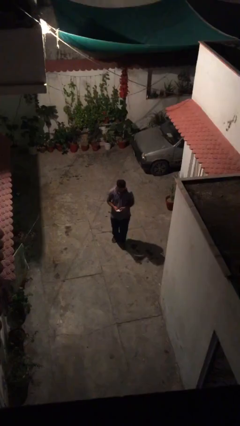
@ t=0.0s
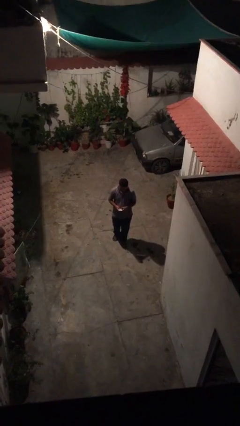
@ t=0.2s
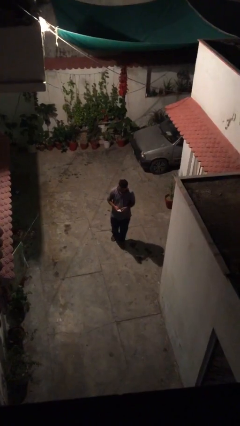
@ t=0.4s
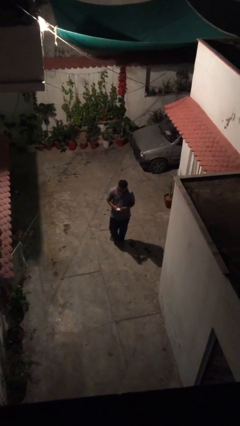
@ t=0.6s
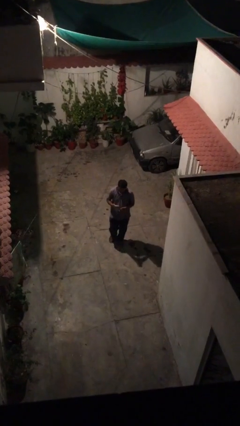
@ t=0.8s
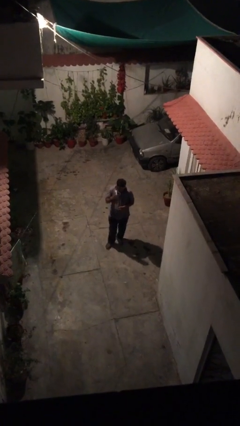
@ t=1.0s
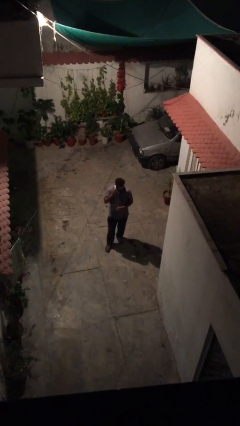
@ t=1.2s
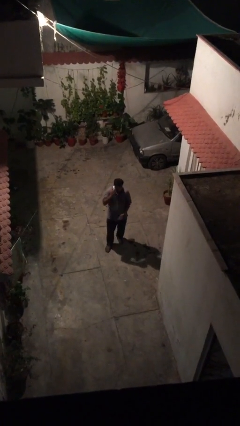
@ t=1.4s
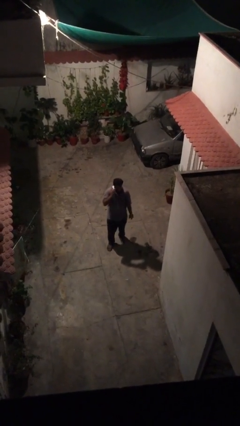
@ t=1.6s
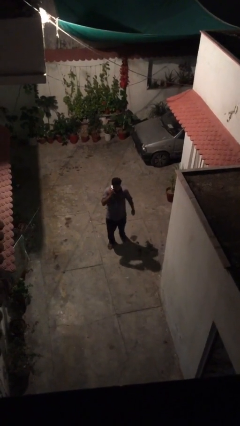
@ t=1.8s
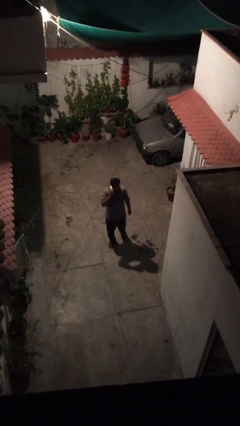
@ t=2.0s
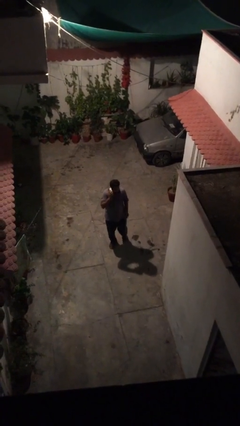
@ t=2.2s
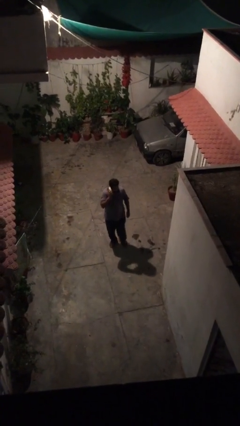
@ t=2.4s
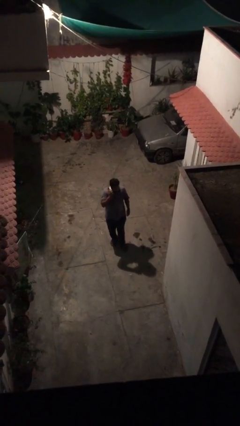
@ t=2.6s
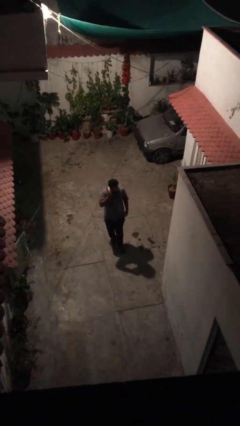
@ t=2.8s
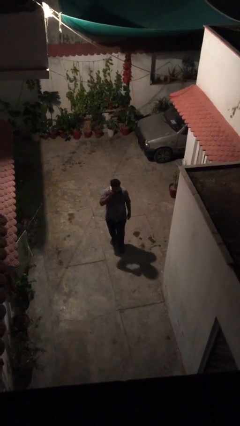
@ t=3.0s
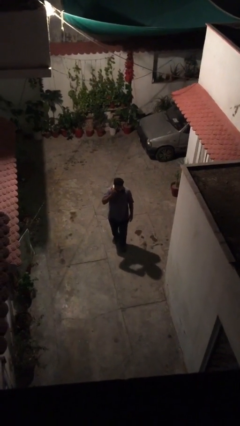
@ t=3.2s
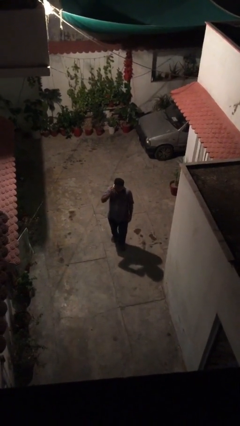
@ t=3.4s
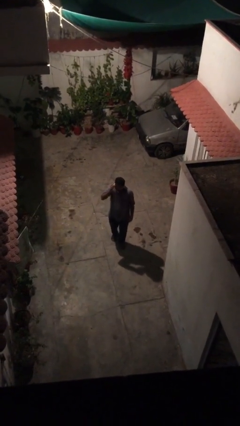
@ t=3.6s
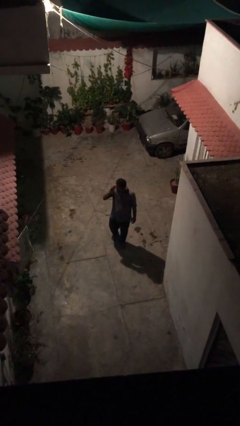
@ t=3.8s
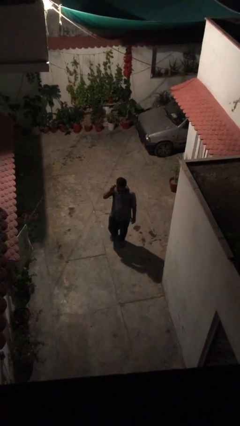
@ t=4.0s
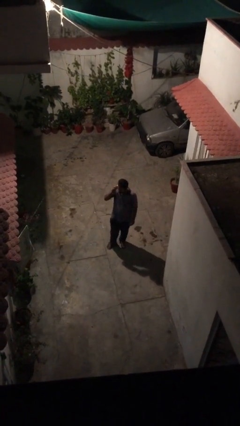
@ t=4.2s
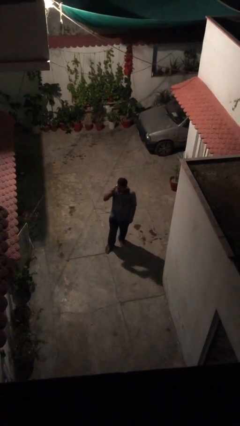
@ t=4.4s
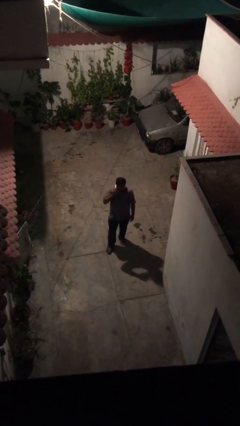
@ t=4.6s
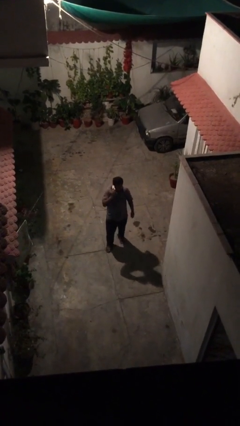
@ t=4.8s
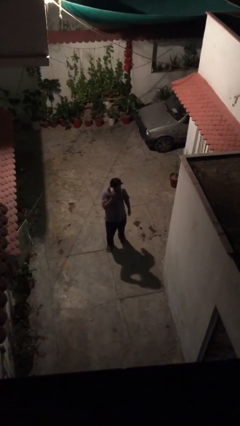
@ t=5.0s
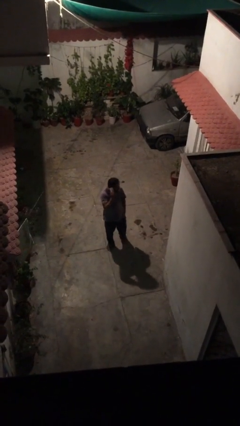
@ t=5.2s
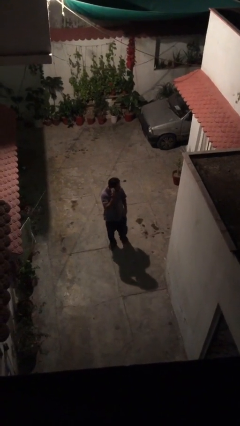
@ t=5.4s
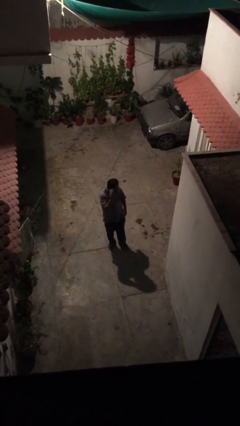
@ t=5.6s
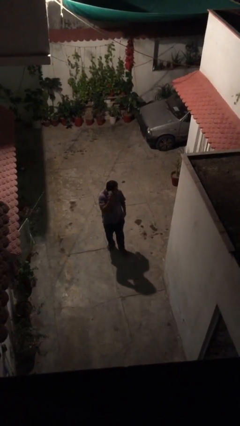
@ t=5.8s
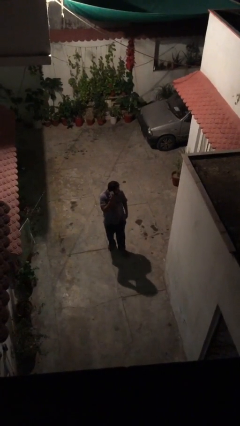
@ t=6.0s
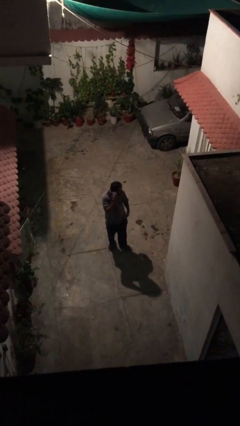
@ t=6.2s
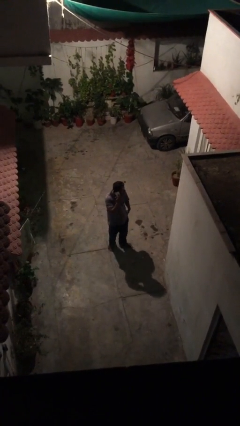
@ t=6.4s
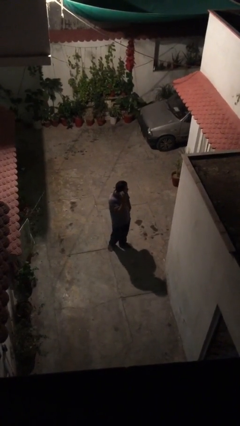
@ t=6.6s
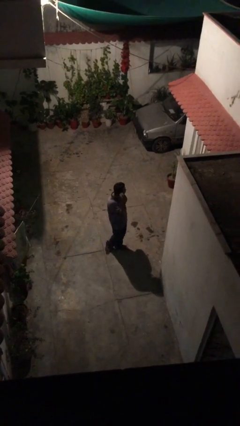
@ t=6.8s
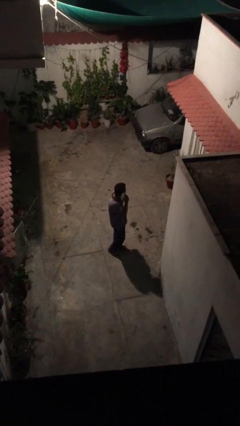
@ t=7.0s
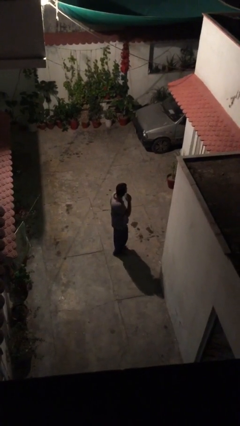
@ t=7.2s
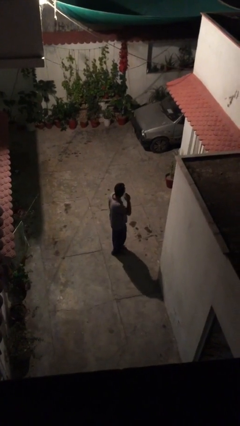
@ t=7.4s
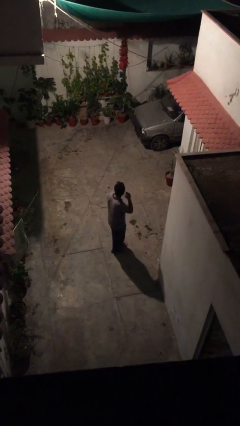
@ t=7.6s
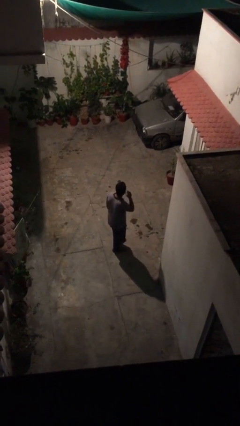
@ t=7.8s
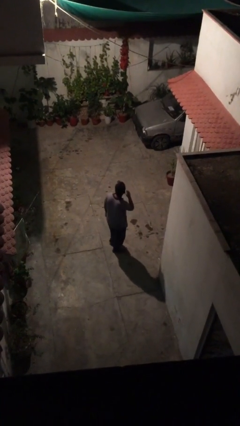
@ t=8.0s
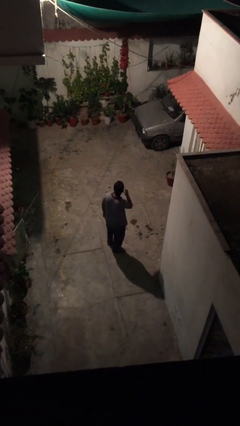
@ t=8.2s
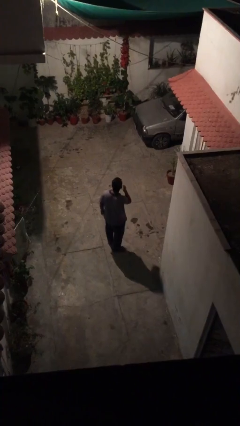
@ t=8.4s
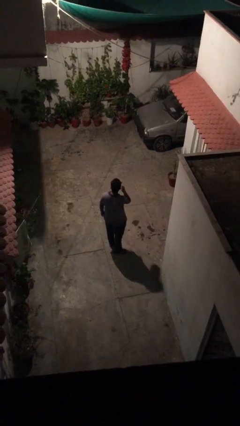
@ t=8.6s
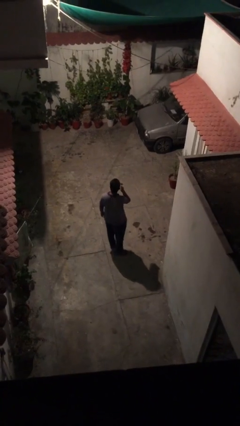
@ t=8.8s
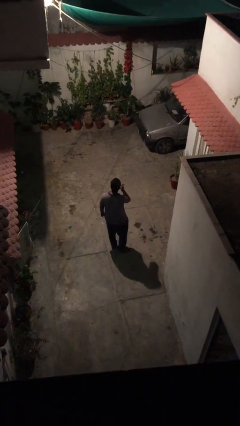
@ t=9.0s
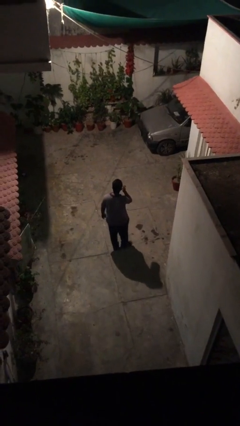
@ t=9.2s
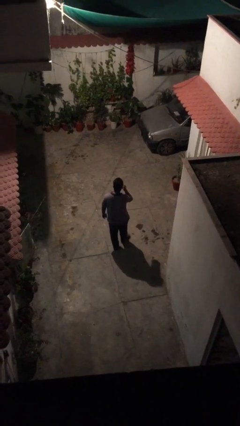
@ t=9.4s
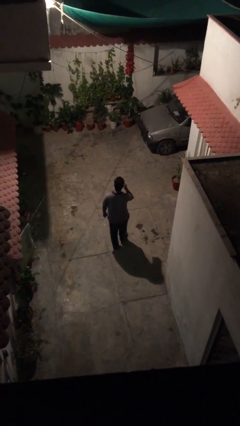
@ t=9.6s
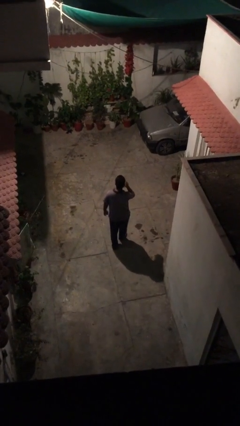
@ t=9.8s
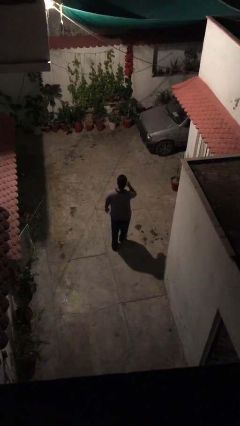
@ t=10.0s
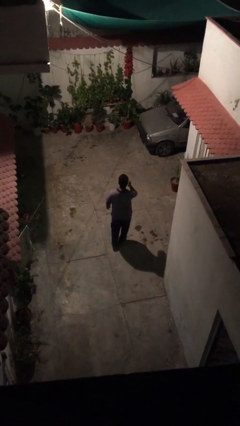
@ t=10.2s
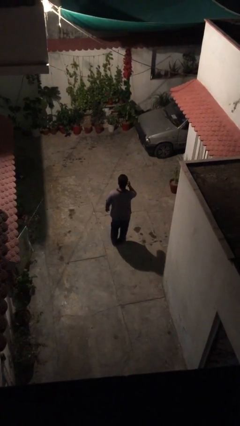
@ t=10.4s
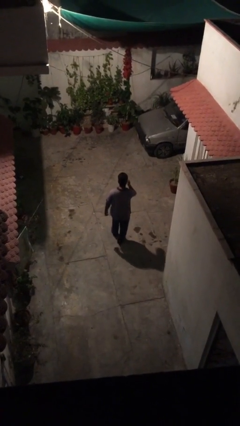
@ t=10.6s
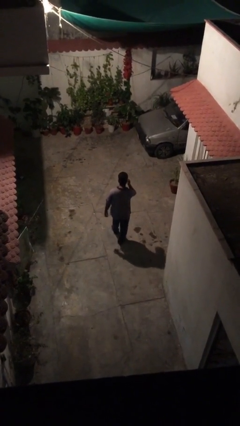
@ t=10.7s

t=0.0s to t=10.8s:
person talks on phone

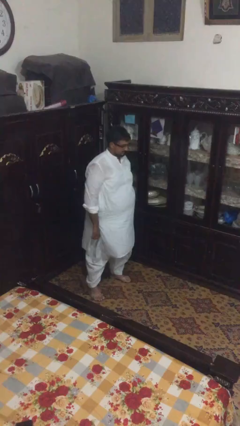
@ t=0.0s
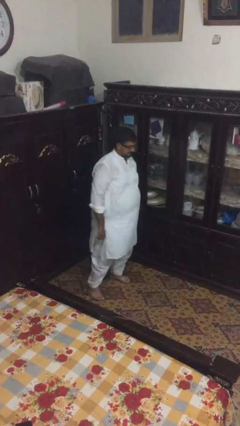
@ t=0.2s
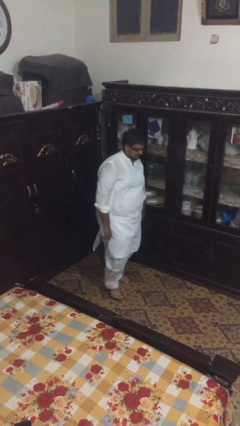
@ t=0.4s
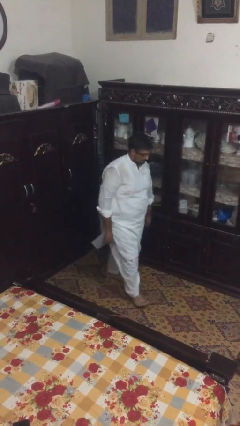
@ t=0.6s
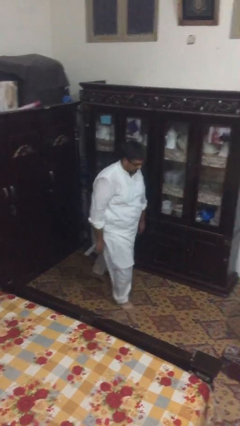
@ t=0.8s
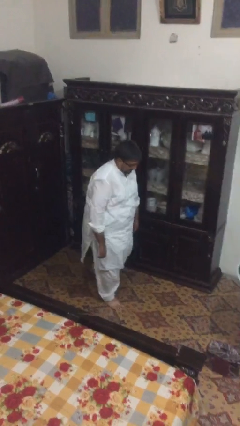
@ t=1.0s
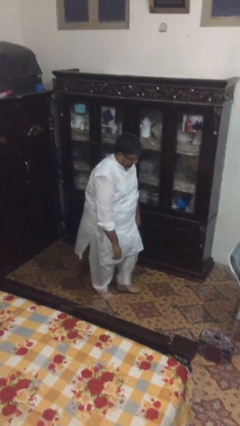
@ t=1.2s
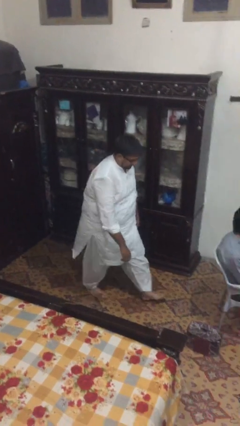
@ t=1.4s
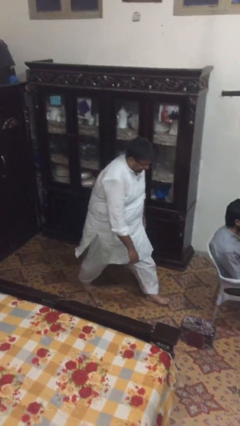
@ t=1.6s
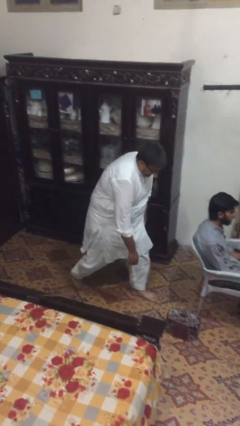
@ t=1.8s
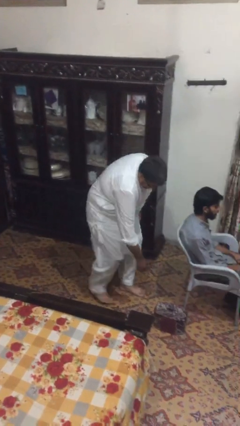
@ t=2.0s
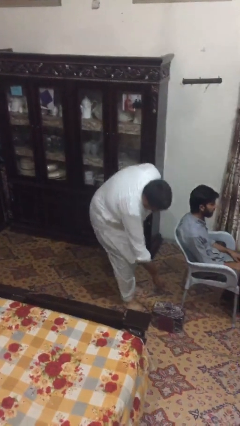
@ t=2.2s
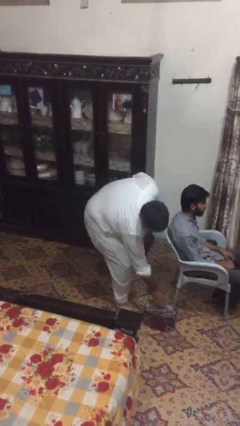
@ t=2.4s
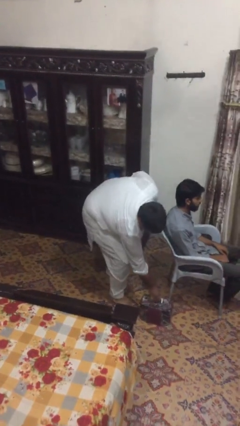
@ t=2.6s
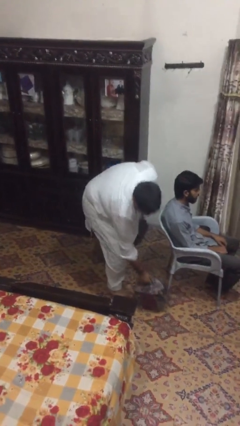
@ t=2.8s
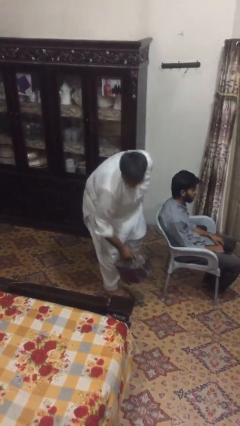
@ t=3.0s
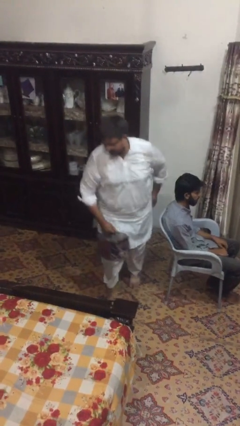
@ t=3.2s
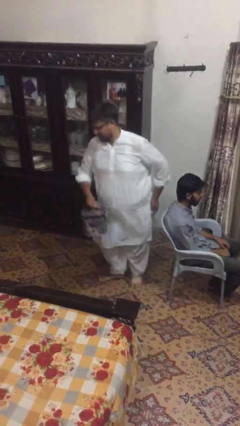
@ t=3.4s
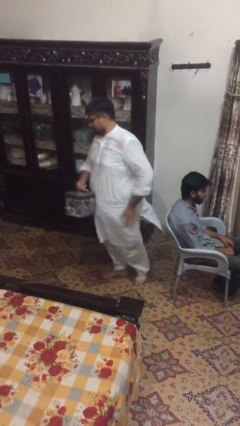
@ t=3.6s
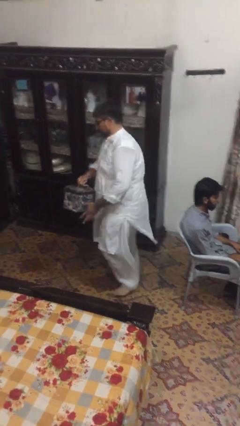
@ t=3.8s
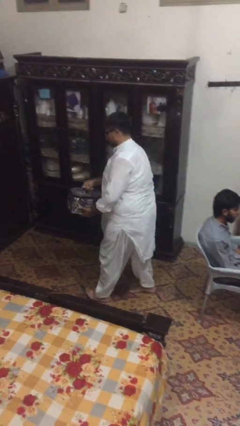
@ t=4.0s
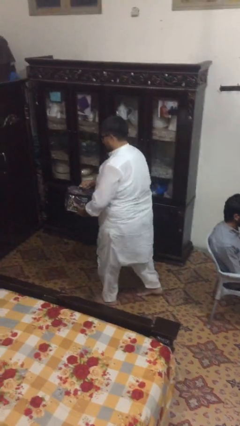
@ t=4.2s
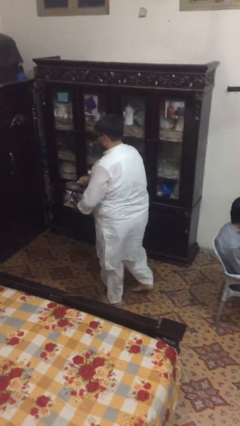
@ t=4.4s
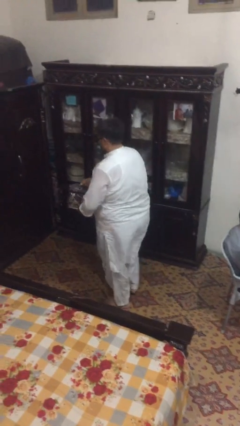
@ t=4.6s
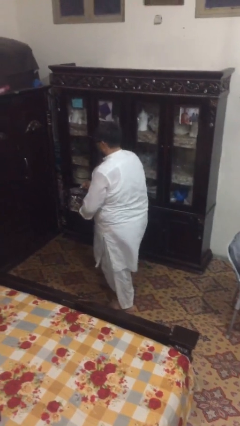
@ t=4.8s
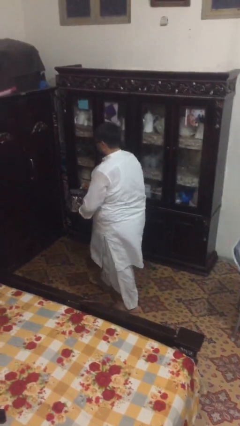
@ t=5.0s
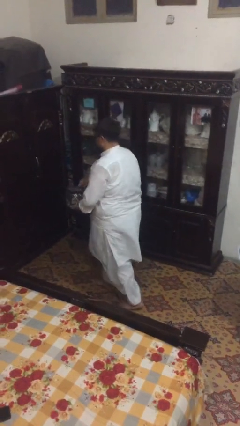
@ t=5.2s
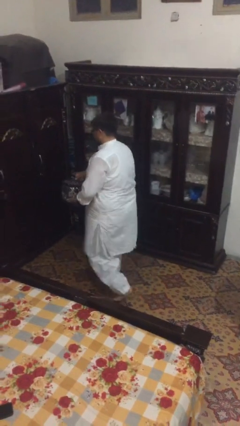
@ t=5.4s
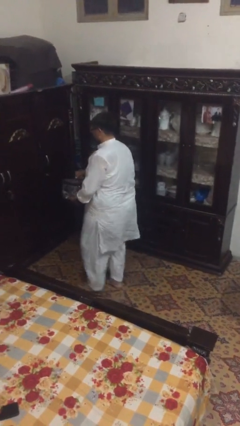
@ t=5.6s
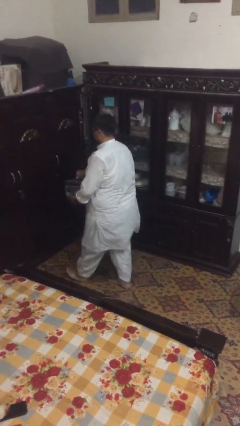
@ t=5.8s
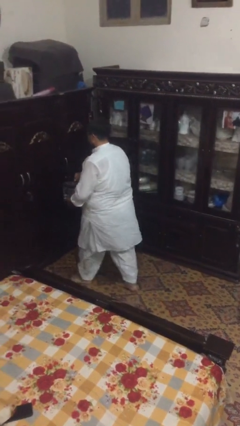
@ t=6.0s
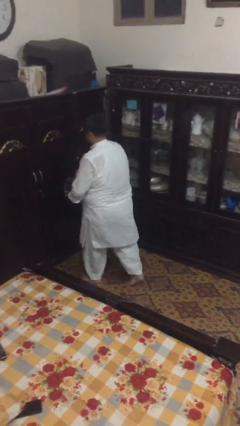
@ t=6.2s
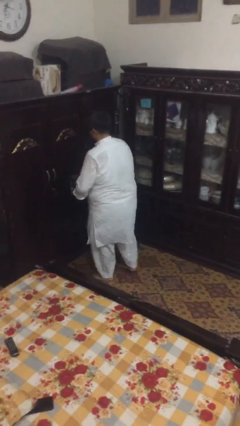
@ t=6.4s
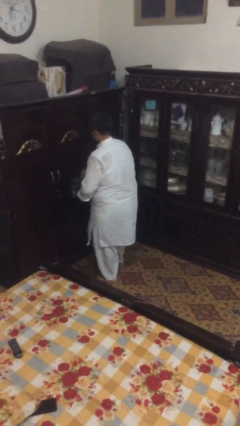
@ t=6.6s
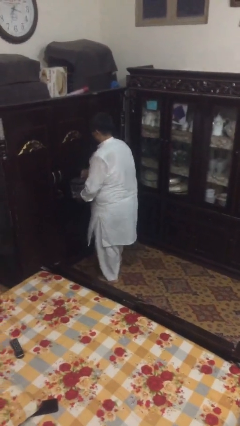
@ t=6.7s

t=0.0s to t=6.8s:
person steals object from person

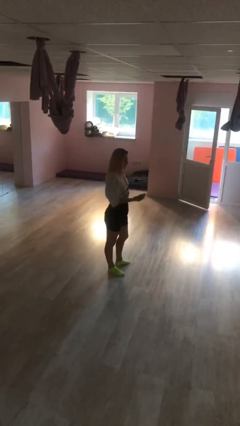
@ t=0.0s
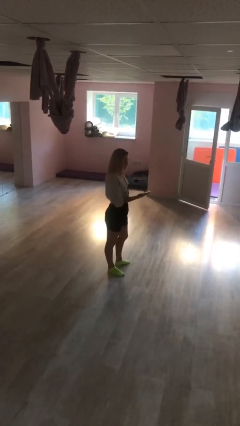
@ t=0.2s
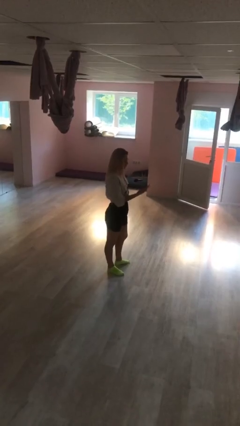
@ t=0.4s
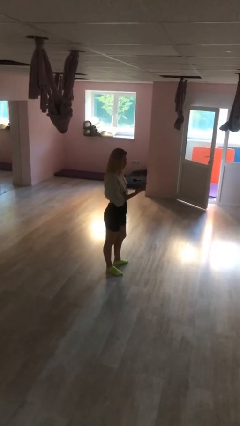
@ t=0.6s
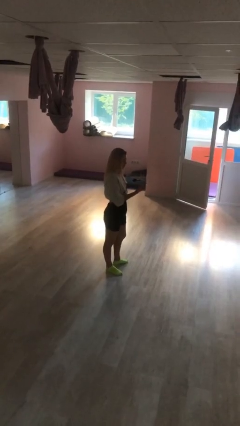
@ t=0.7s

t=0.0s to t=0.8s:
person takes phone from pocket
